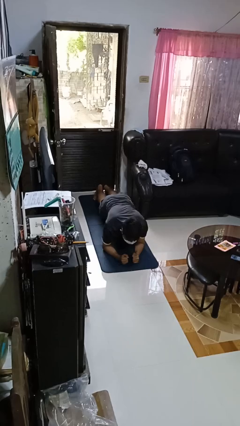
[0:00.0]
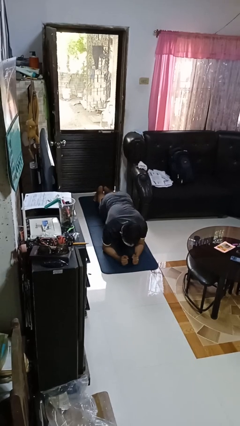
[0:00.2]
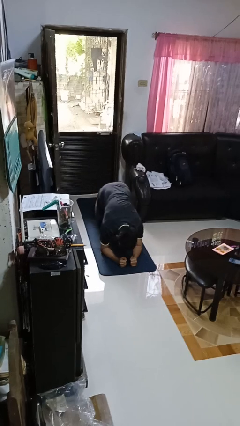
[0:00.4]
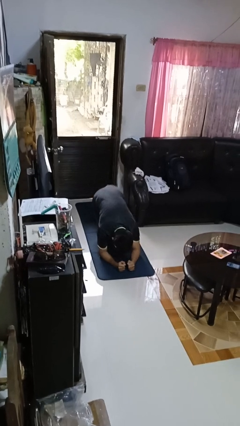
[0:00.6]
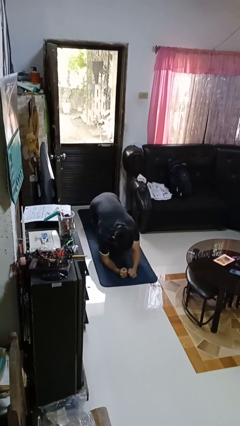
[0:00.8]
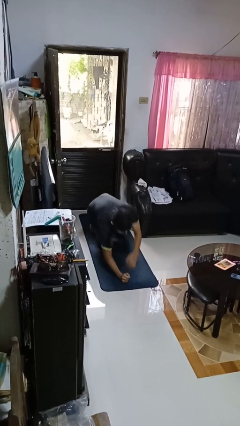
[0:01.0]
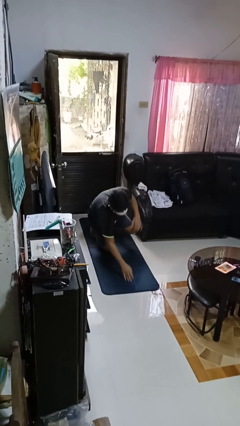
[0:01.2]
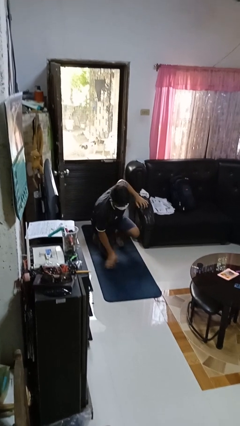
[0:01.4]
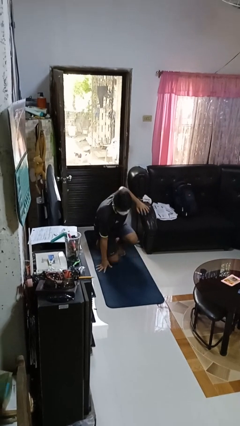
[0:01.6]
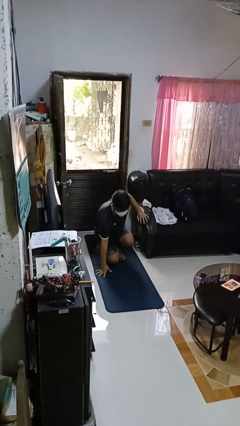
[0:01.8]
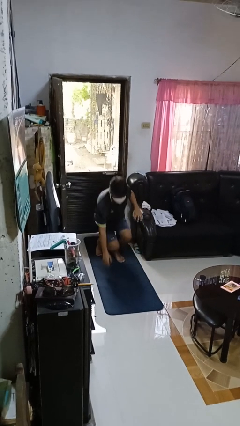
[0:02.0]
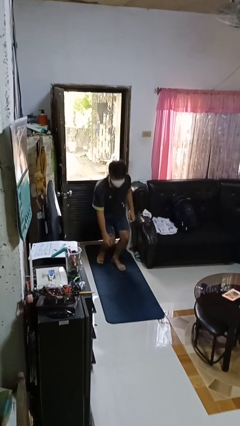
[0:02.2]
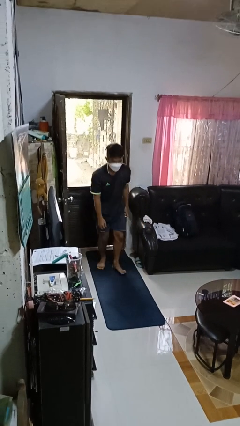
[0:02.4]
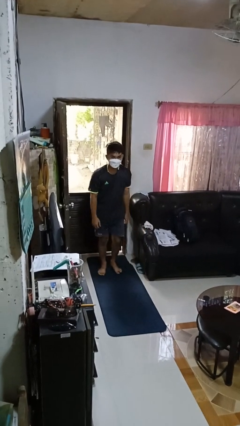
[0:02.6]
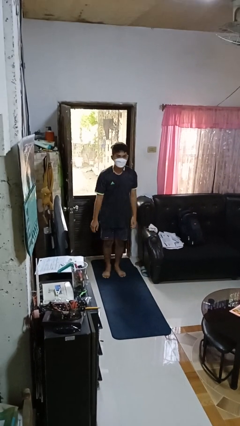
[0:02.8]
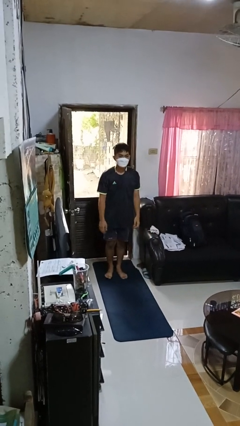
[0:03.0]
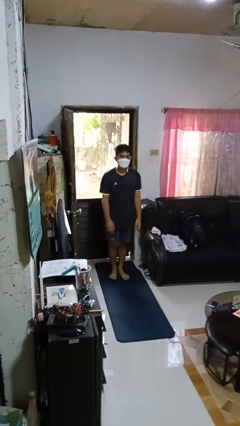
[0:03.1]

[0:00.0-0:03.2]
person stands up from floor

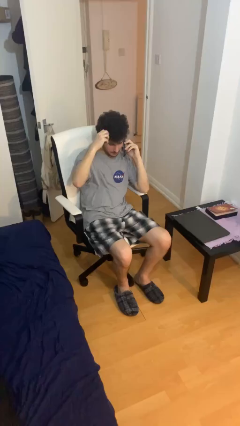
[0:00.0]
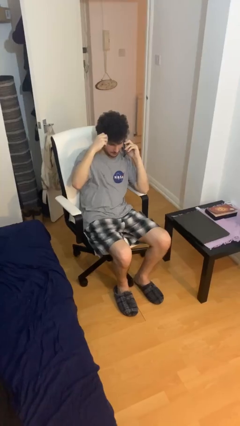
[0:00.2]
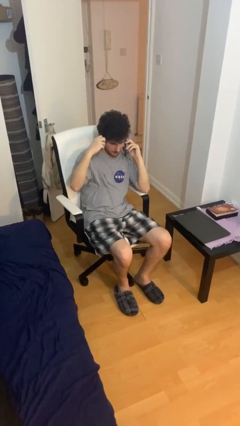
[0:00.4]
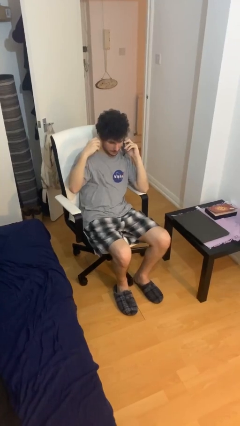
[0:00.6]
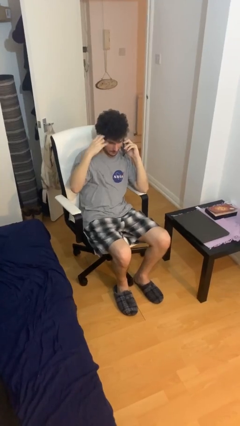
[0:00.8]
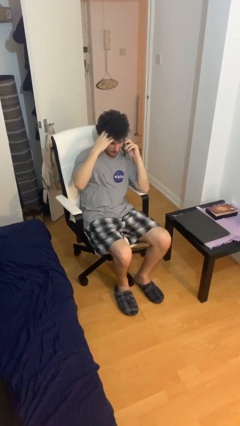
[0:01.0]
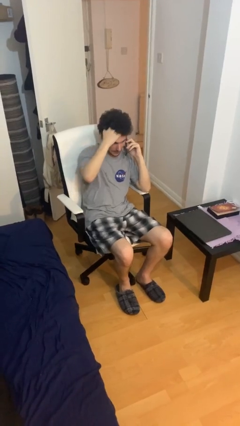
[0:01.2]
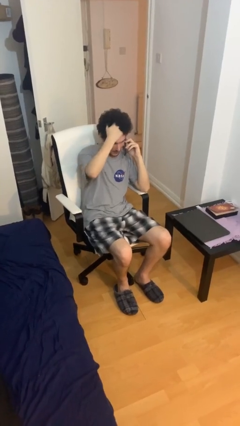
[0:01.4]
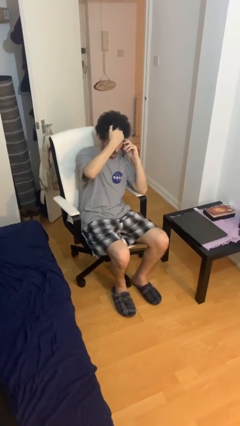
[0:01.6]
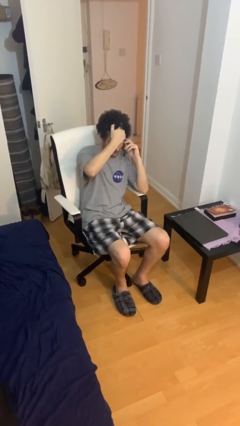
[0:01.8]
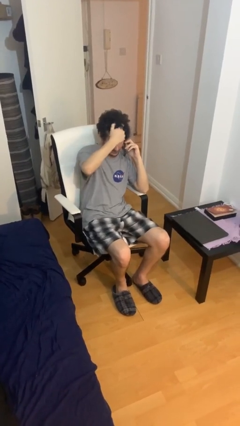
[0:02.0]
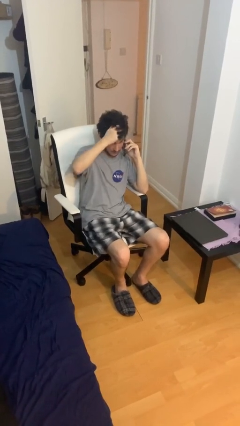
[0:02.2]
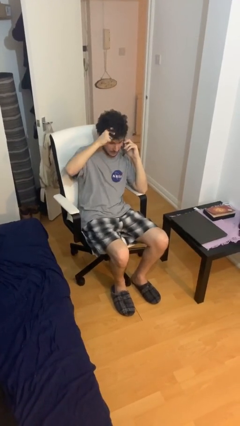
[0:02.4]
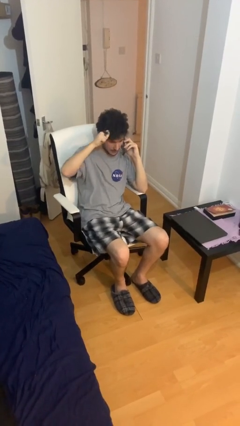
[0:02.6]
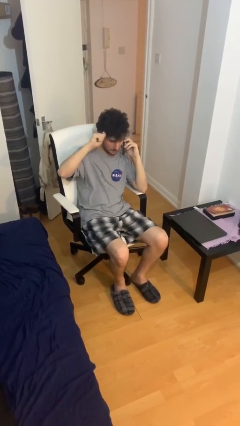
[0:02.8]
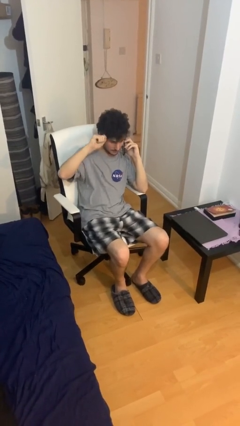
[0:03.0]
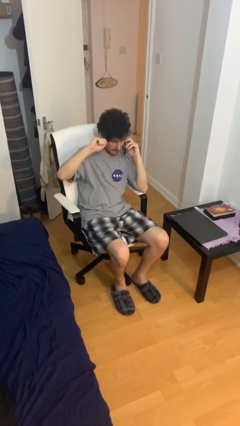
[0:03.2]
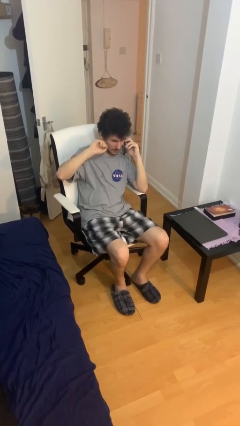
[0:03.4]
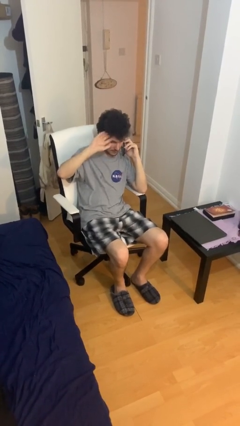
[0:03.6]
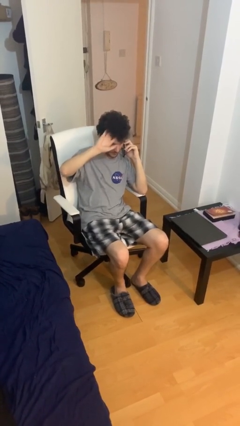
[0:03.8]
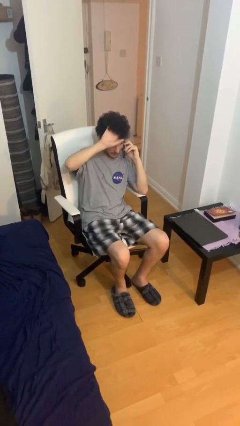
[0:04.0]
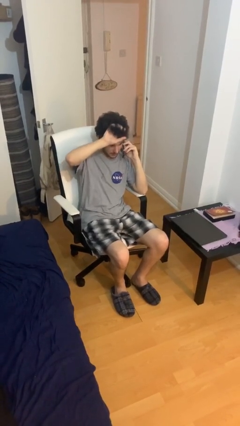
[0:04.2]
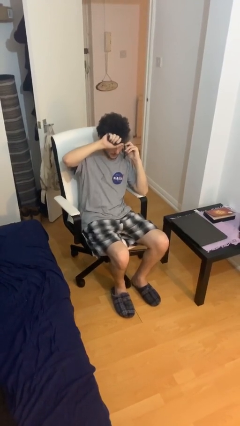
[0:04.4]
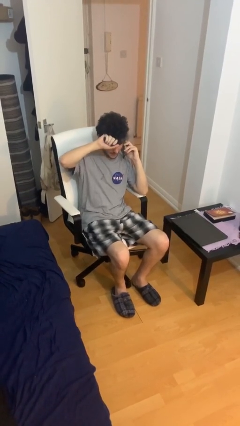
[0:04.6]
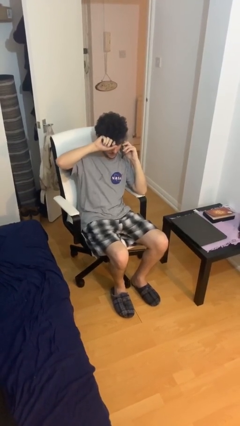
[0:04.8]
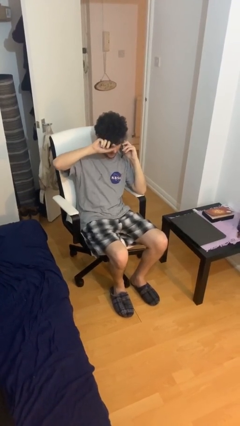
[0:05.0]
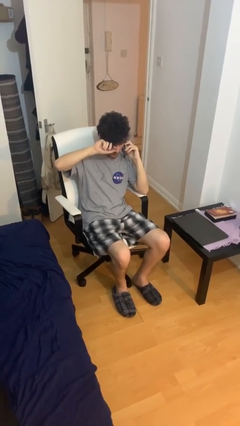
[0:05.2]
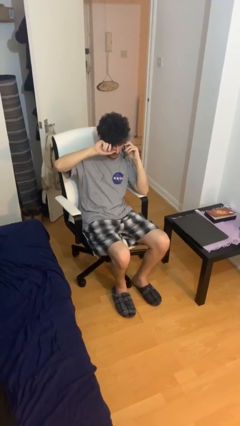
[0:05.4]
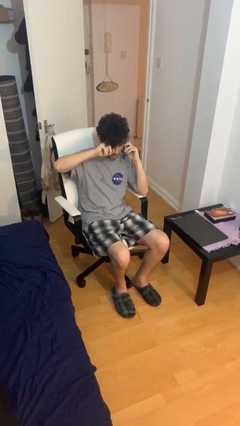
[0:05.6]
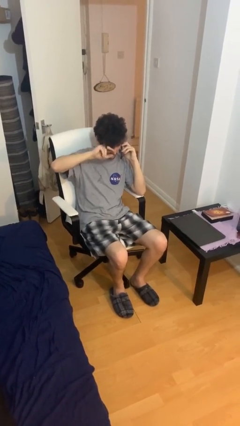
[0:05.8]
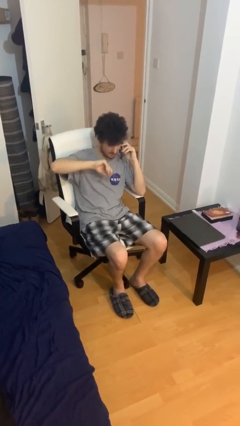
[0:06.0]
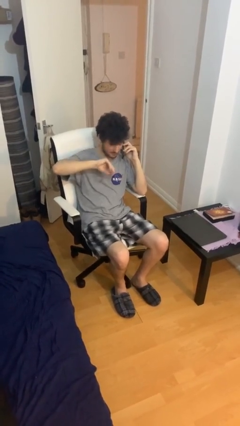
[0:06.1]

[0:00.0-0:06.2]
person talks on phone

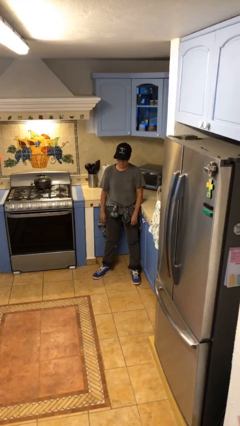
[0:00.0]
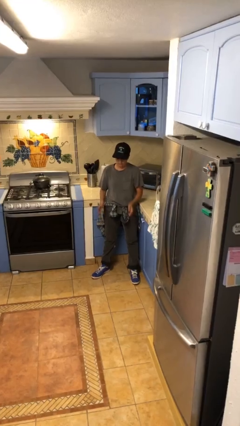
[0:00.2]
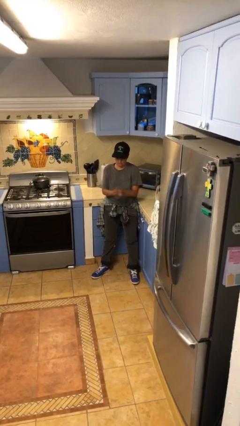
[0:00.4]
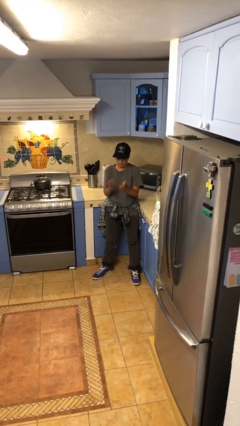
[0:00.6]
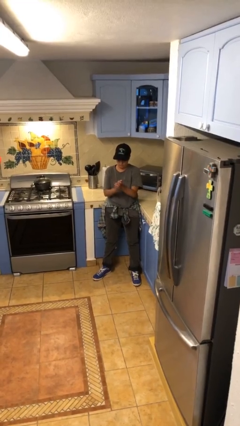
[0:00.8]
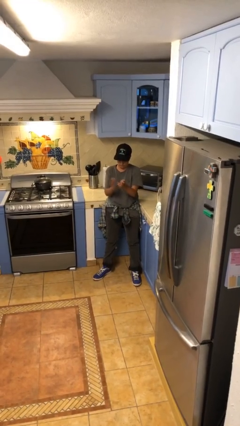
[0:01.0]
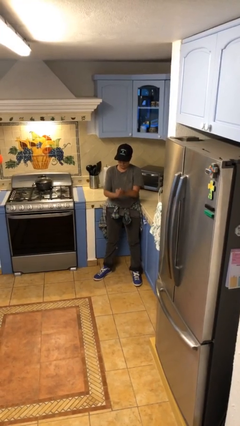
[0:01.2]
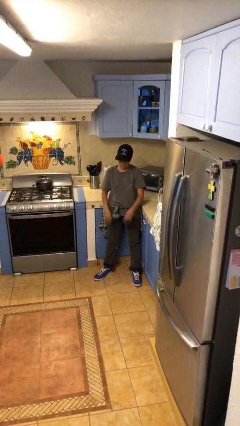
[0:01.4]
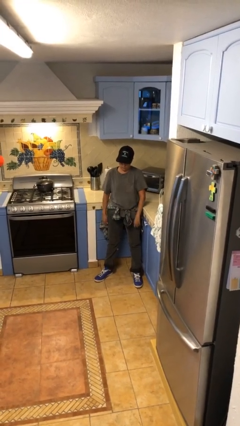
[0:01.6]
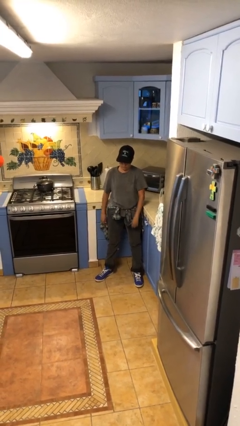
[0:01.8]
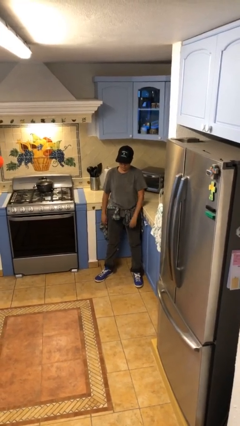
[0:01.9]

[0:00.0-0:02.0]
person claps hands

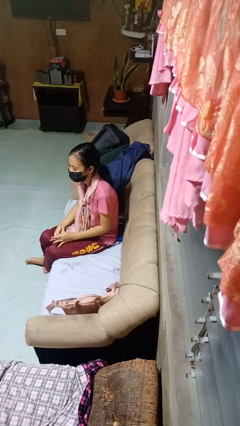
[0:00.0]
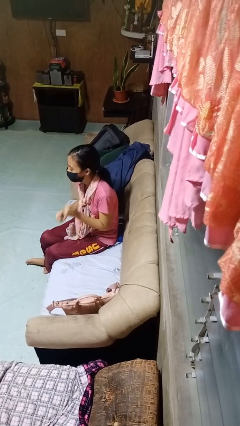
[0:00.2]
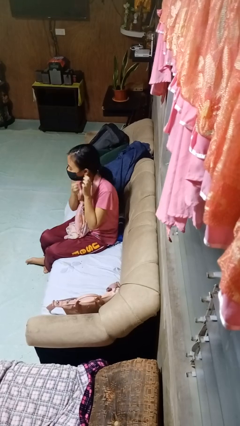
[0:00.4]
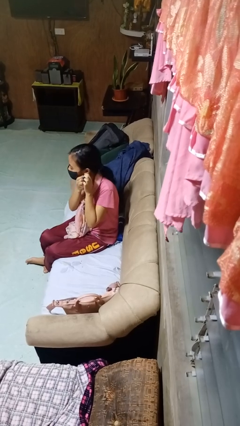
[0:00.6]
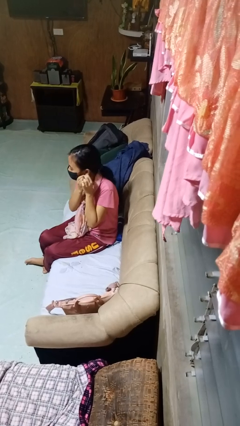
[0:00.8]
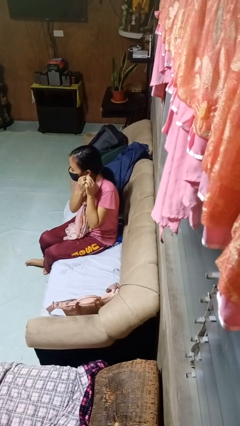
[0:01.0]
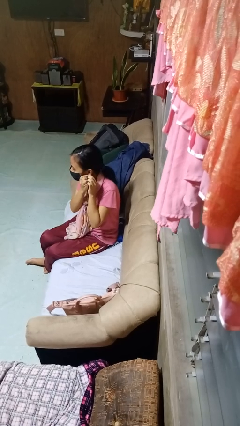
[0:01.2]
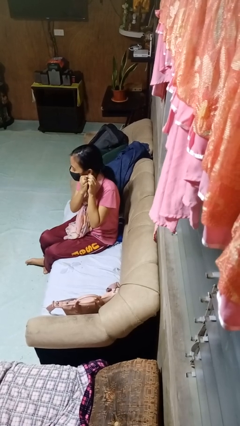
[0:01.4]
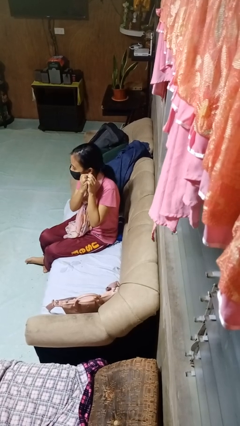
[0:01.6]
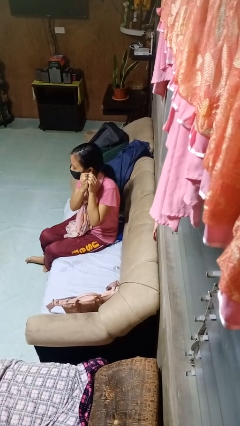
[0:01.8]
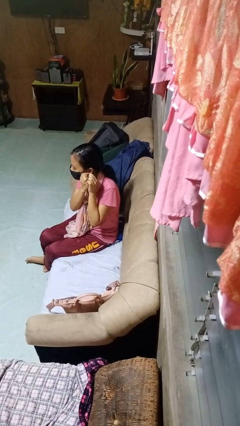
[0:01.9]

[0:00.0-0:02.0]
person puts on earrings

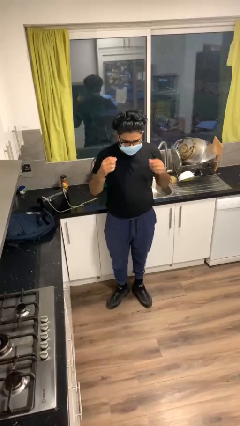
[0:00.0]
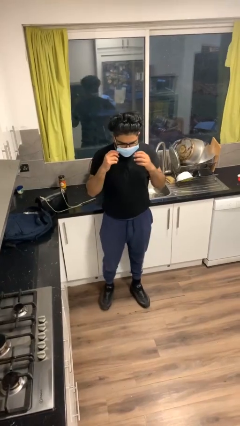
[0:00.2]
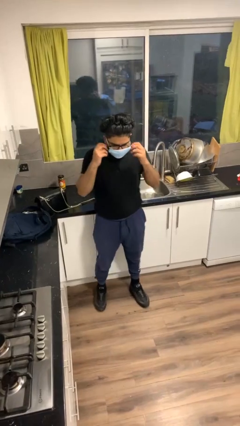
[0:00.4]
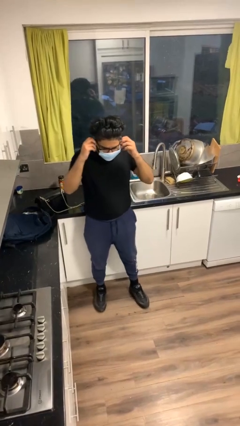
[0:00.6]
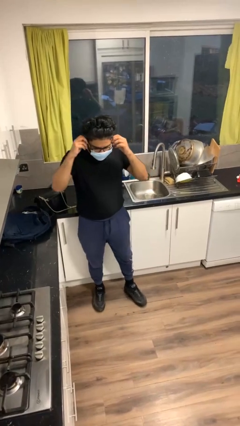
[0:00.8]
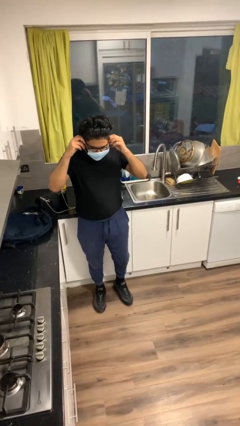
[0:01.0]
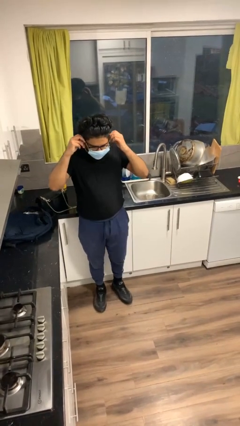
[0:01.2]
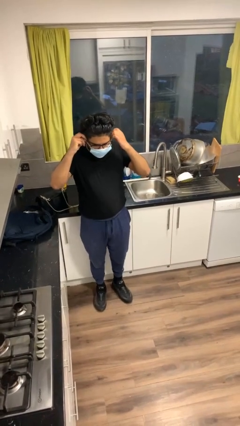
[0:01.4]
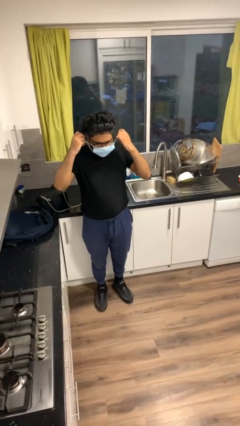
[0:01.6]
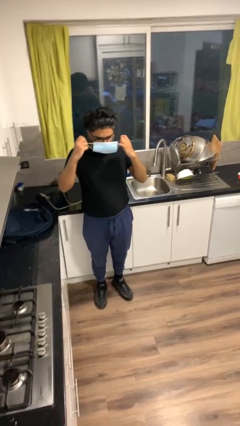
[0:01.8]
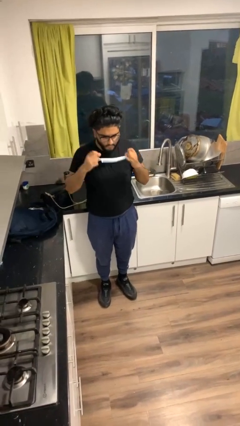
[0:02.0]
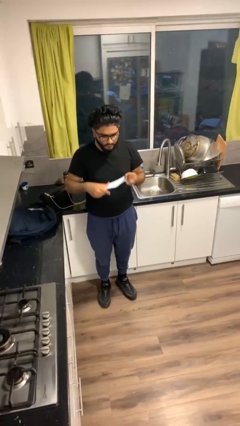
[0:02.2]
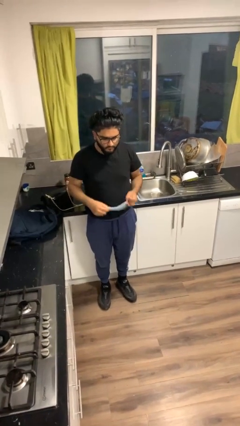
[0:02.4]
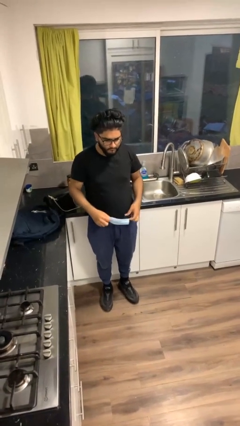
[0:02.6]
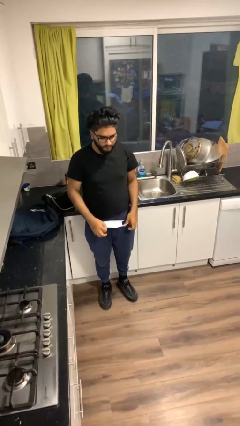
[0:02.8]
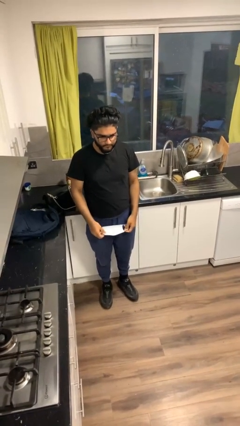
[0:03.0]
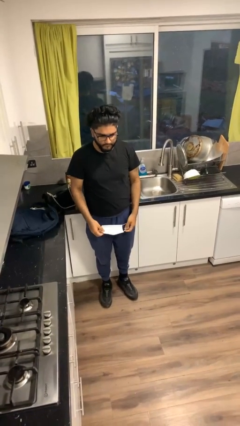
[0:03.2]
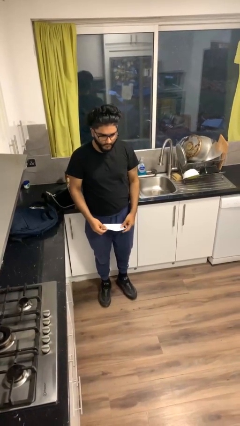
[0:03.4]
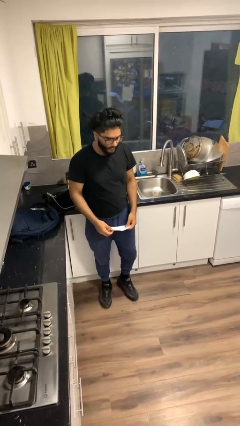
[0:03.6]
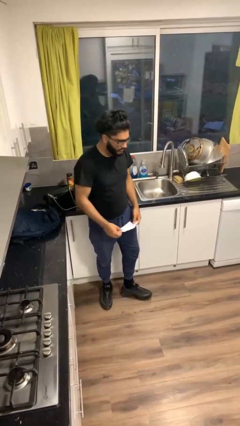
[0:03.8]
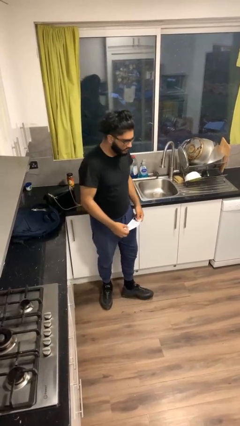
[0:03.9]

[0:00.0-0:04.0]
person takes off facemask

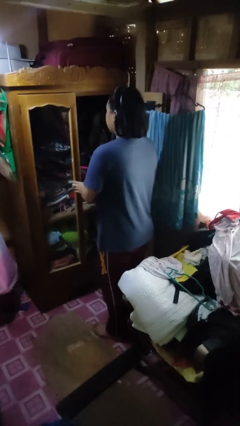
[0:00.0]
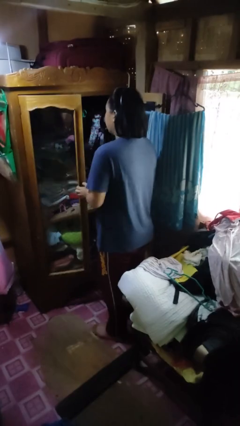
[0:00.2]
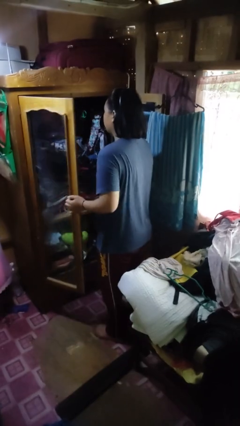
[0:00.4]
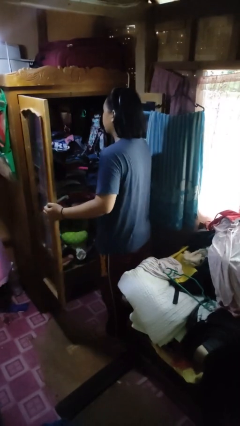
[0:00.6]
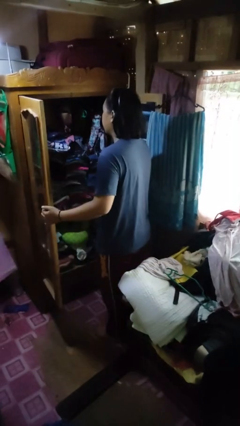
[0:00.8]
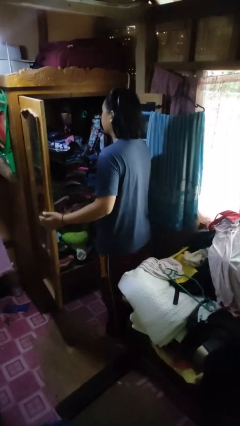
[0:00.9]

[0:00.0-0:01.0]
person opens closet door
